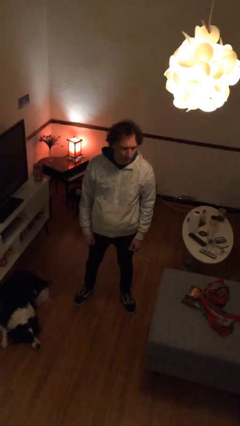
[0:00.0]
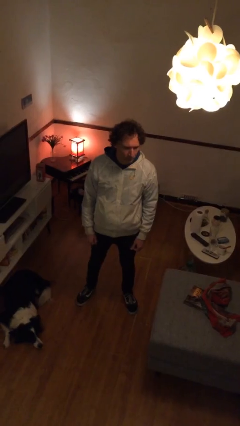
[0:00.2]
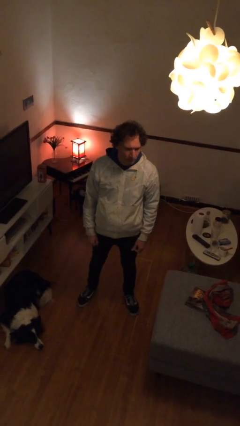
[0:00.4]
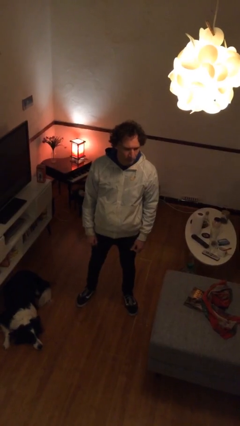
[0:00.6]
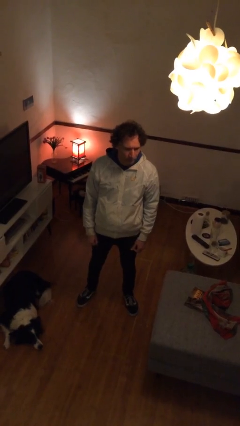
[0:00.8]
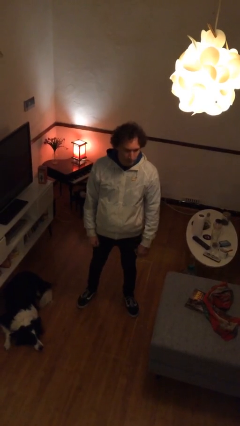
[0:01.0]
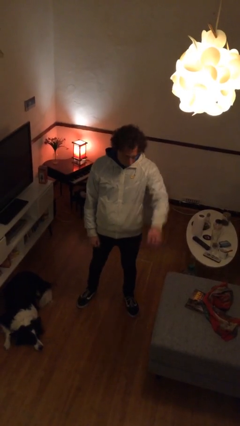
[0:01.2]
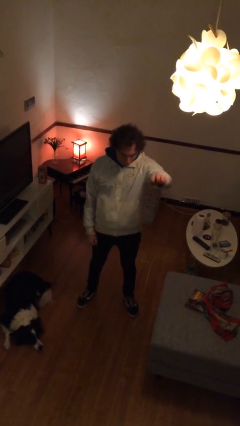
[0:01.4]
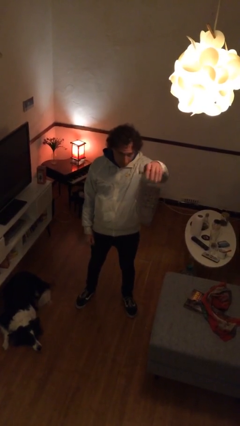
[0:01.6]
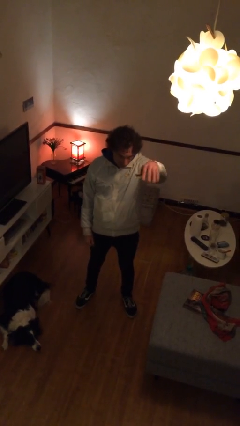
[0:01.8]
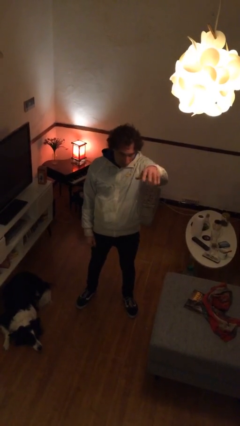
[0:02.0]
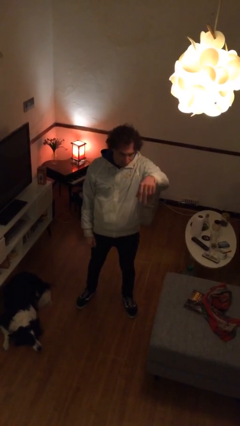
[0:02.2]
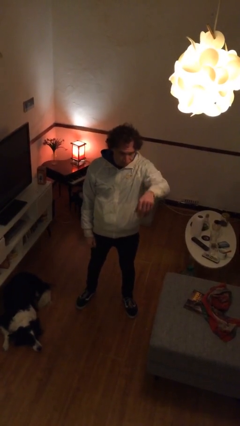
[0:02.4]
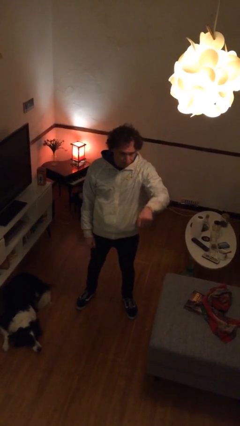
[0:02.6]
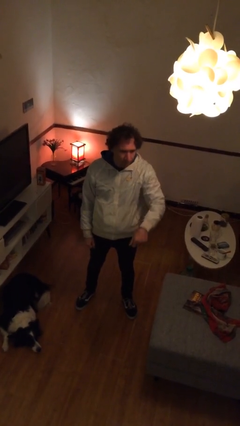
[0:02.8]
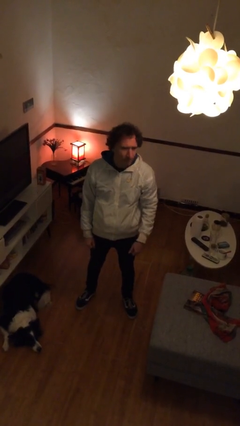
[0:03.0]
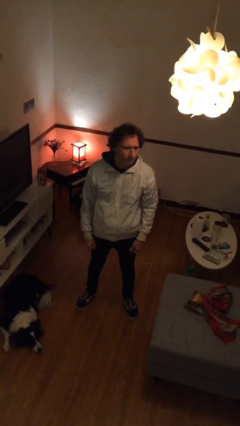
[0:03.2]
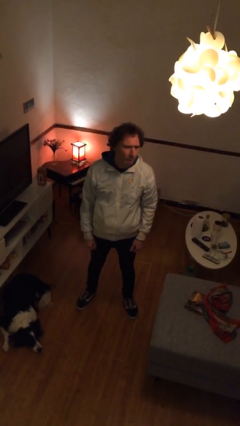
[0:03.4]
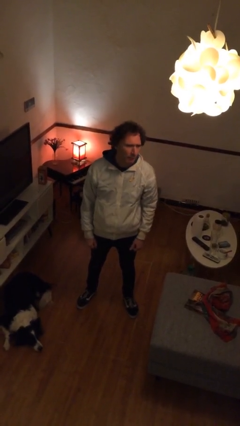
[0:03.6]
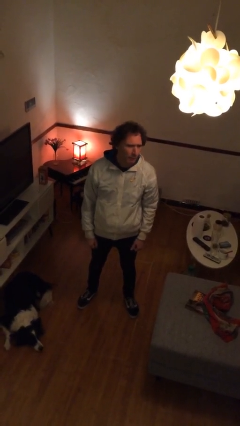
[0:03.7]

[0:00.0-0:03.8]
person gestures come here

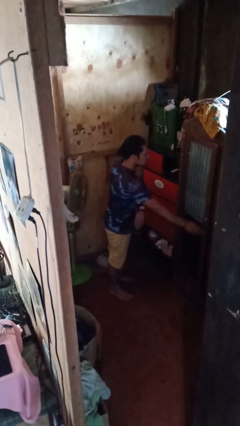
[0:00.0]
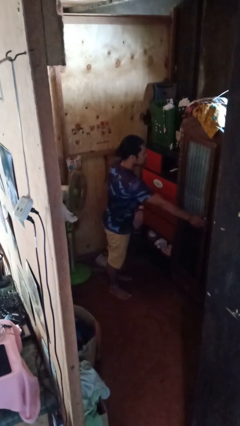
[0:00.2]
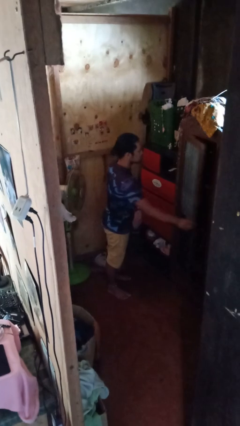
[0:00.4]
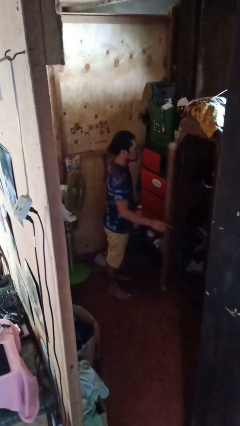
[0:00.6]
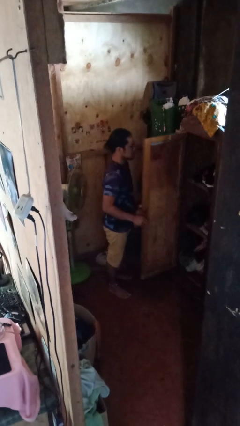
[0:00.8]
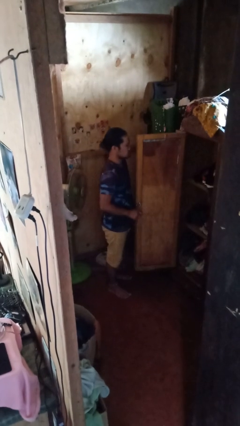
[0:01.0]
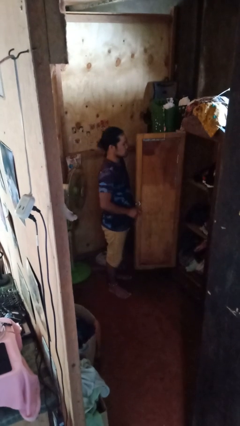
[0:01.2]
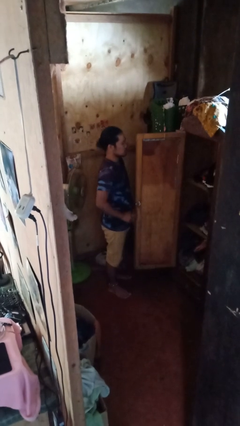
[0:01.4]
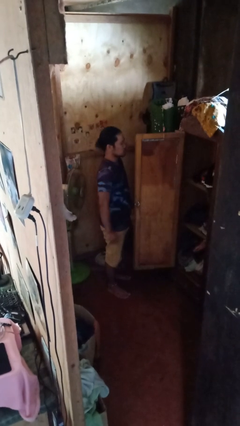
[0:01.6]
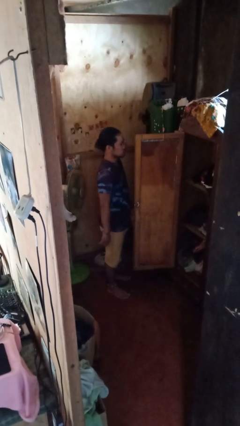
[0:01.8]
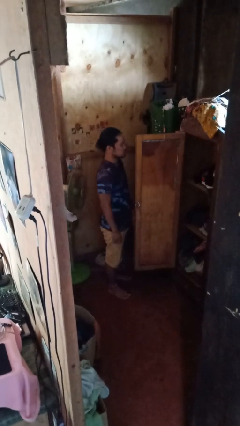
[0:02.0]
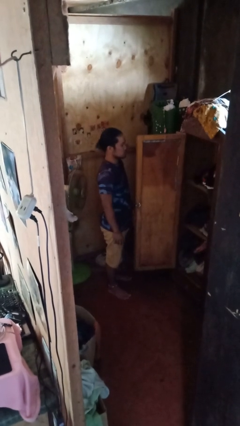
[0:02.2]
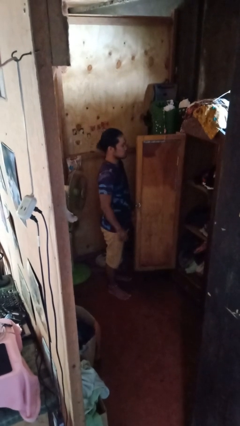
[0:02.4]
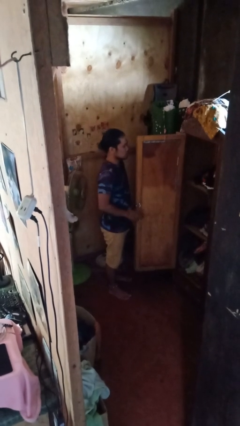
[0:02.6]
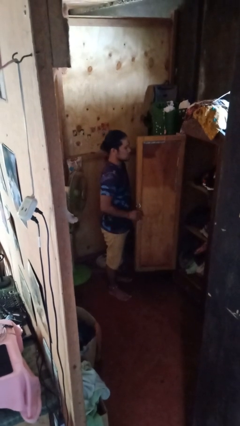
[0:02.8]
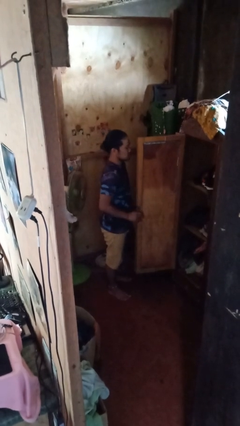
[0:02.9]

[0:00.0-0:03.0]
person opens closet door

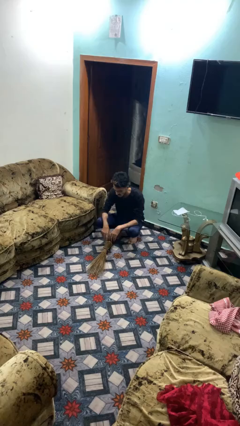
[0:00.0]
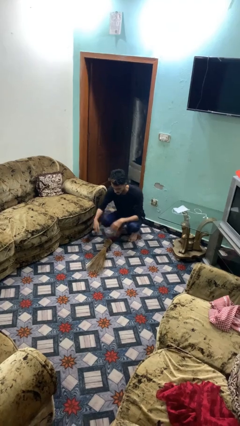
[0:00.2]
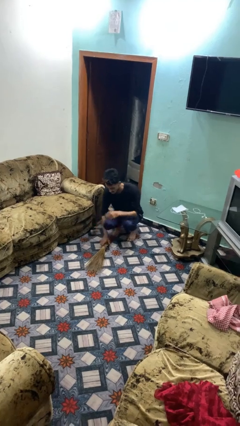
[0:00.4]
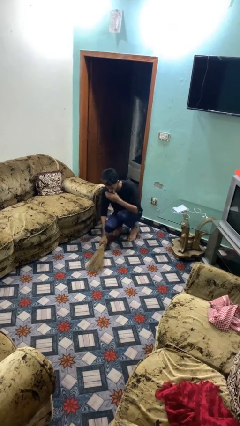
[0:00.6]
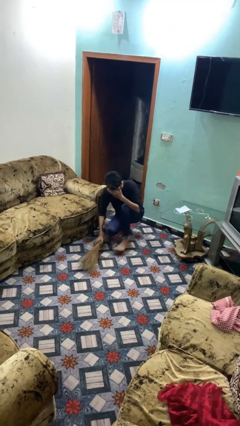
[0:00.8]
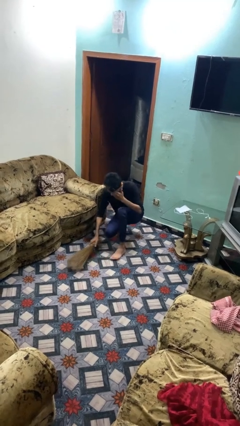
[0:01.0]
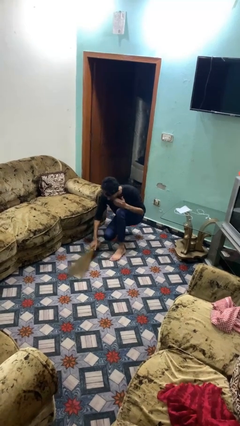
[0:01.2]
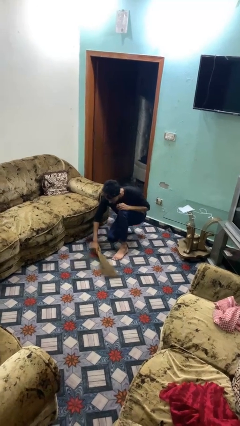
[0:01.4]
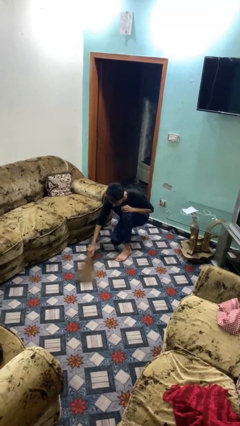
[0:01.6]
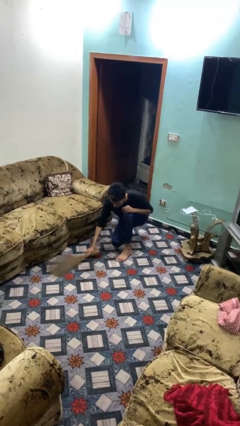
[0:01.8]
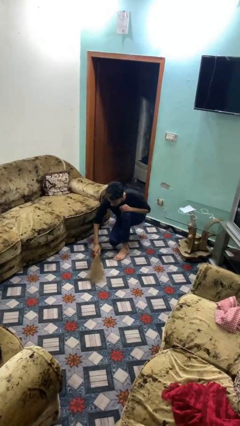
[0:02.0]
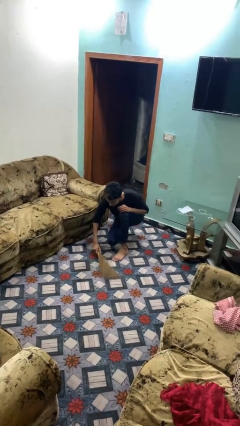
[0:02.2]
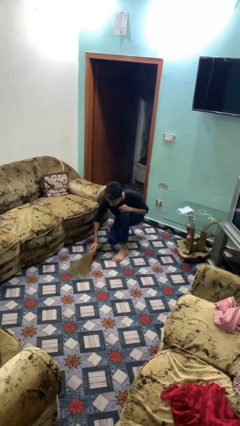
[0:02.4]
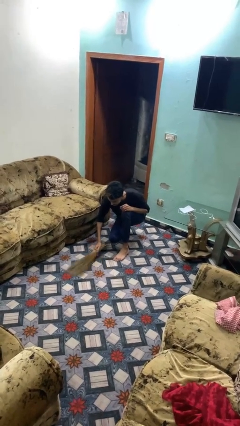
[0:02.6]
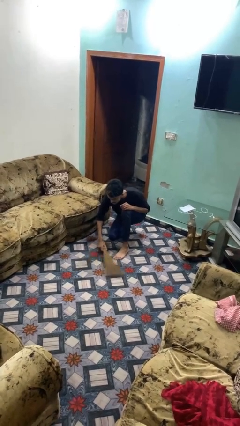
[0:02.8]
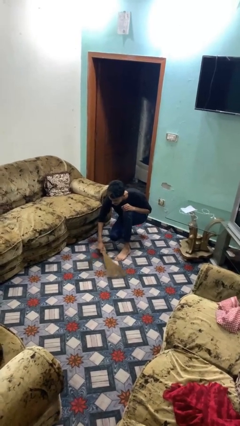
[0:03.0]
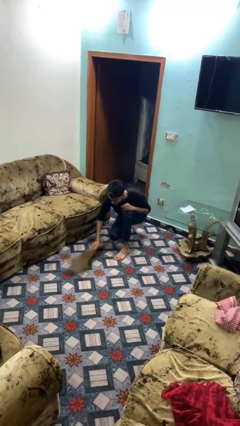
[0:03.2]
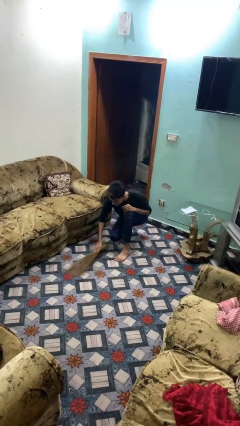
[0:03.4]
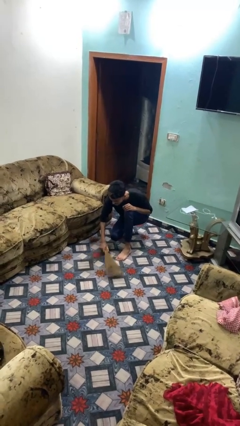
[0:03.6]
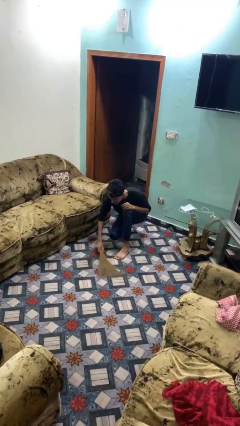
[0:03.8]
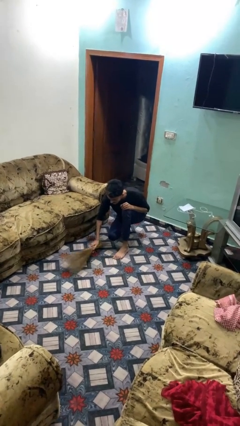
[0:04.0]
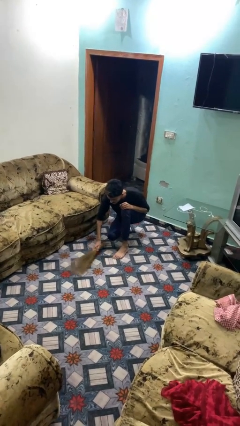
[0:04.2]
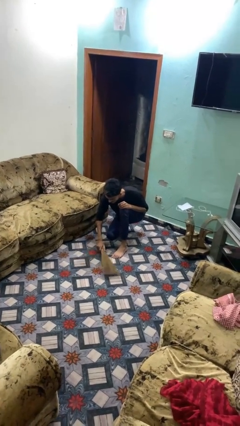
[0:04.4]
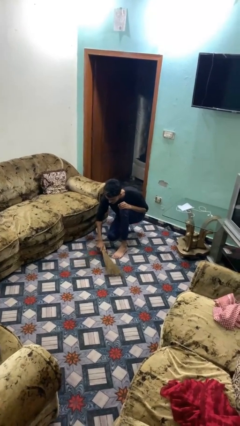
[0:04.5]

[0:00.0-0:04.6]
person sweeps floor

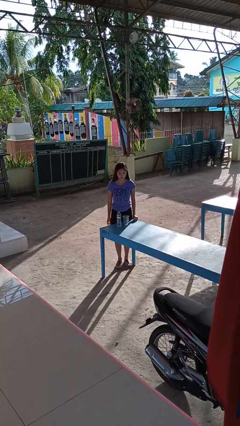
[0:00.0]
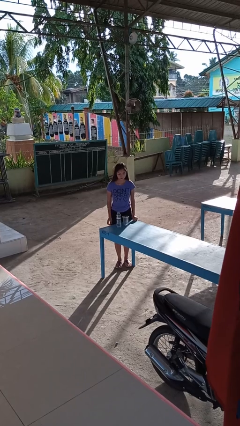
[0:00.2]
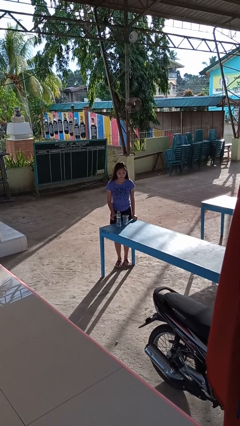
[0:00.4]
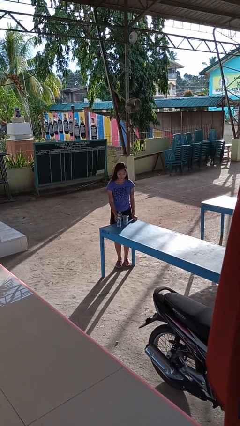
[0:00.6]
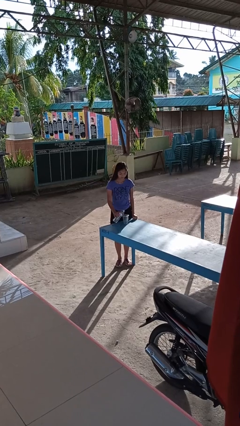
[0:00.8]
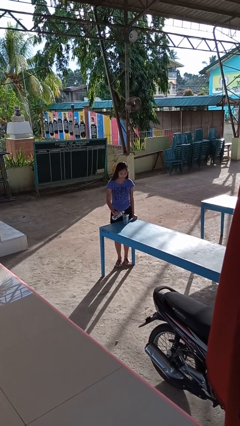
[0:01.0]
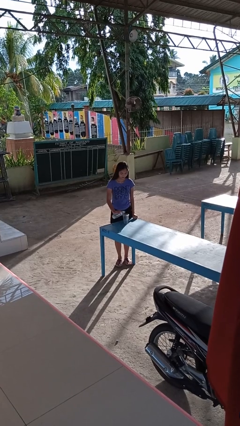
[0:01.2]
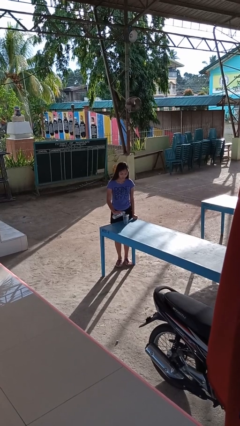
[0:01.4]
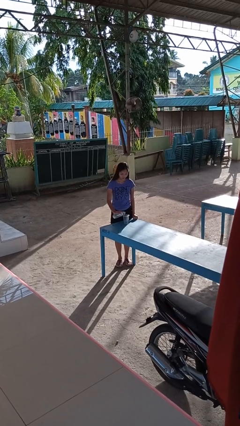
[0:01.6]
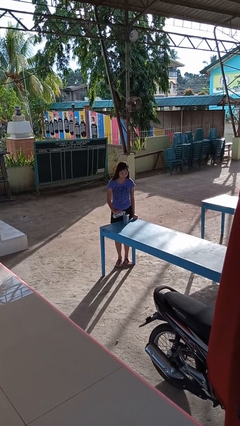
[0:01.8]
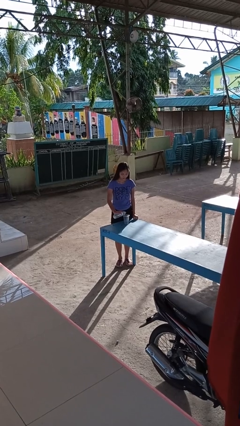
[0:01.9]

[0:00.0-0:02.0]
person pours liquid into cup

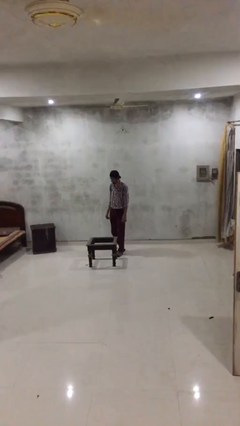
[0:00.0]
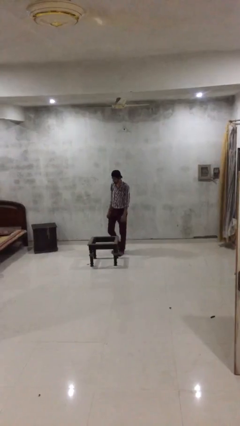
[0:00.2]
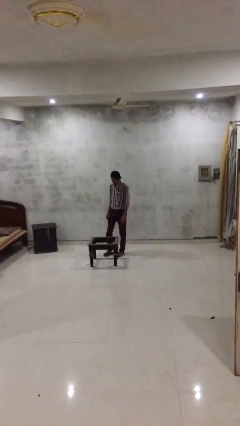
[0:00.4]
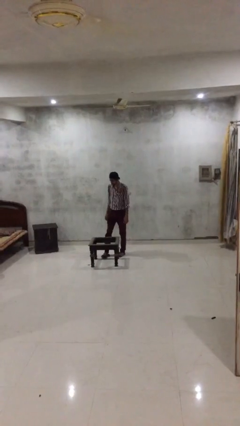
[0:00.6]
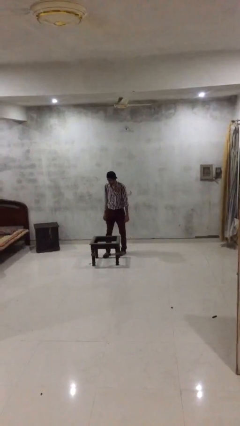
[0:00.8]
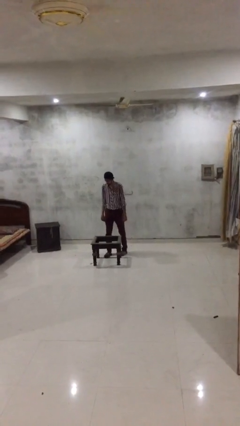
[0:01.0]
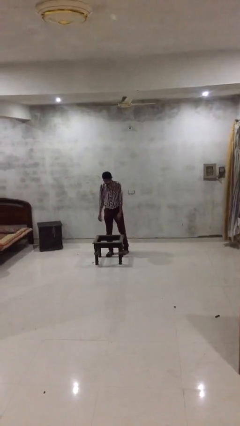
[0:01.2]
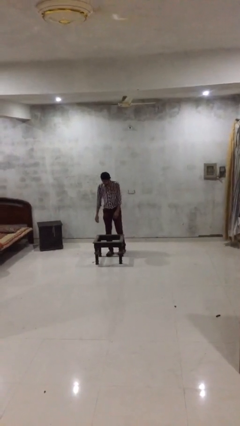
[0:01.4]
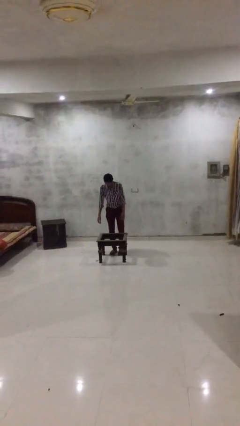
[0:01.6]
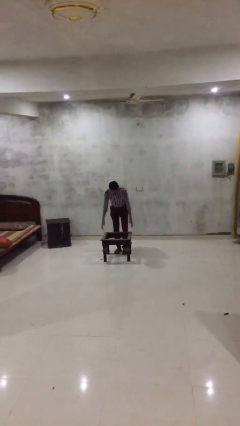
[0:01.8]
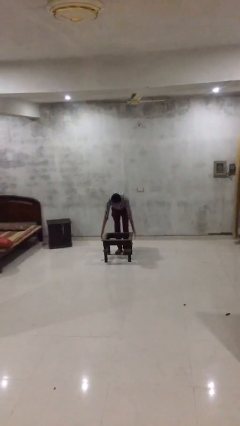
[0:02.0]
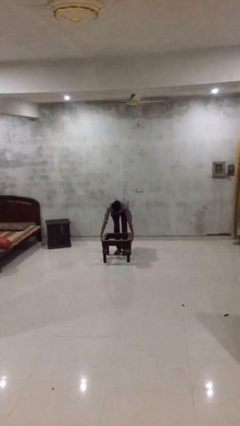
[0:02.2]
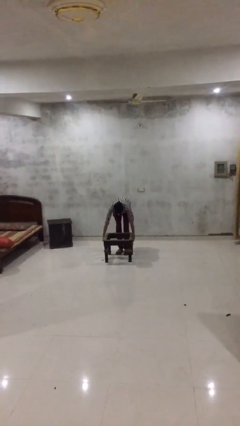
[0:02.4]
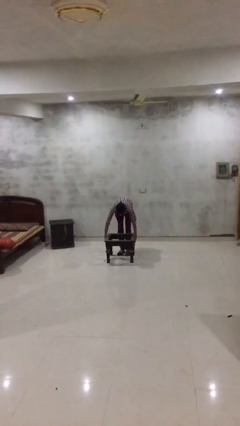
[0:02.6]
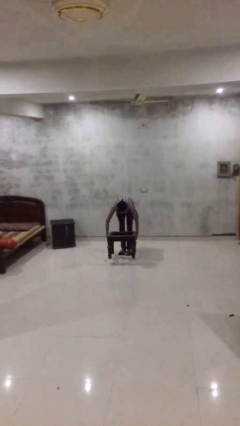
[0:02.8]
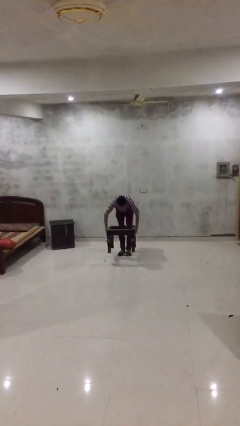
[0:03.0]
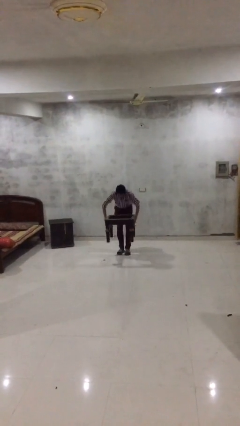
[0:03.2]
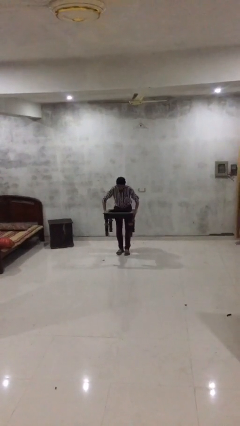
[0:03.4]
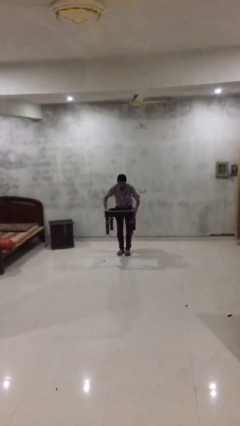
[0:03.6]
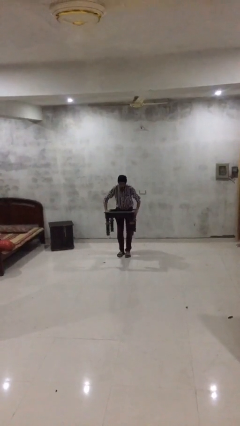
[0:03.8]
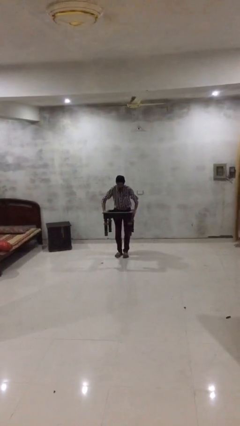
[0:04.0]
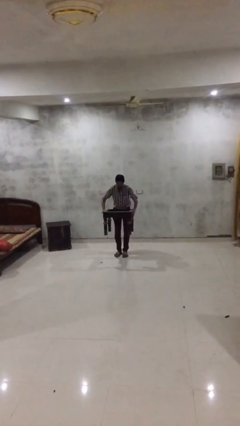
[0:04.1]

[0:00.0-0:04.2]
person picks up object from floor
